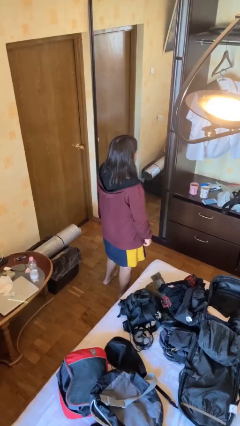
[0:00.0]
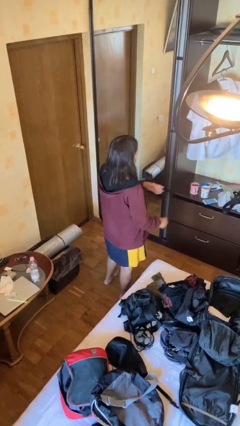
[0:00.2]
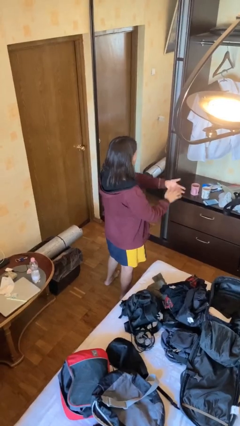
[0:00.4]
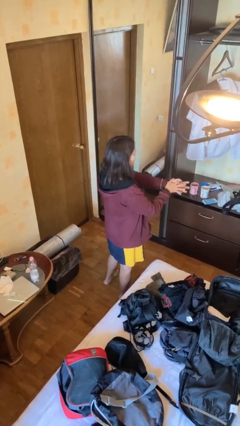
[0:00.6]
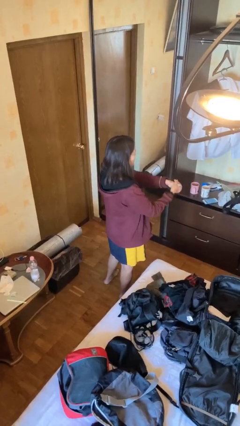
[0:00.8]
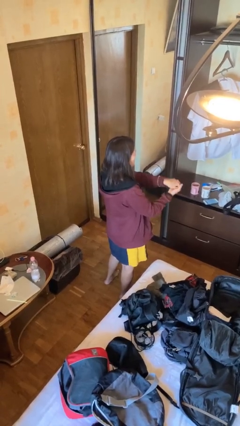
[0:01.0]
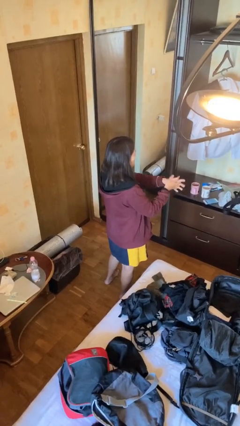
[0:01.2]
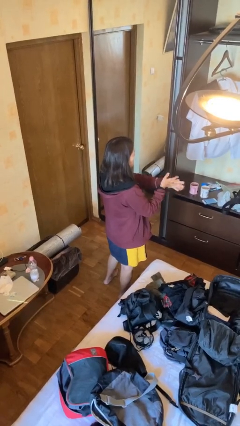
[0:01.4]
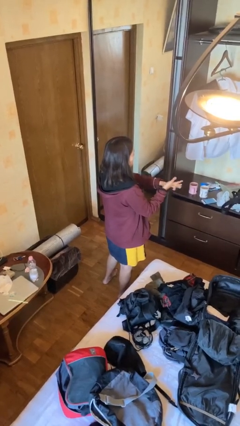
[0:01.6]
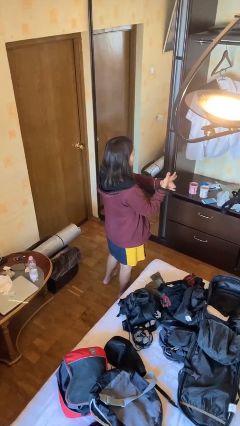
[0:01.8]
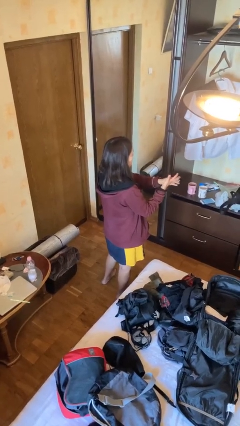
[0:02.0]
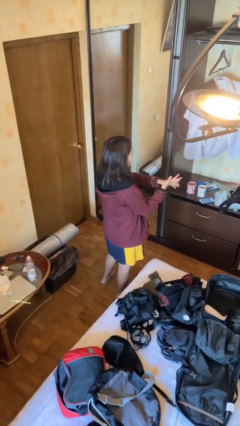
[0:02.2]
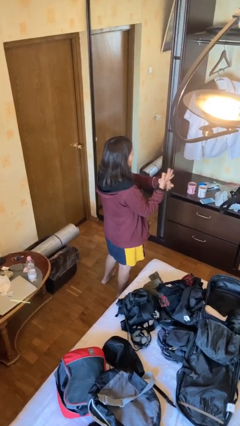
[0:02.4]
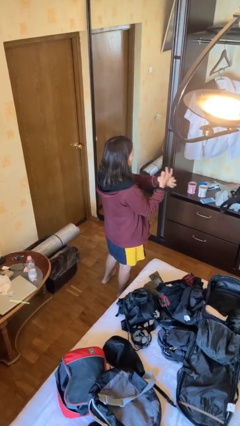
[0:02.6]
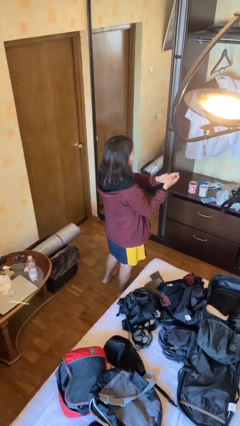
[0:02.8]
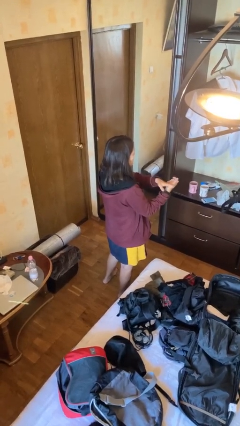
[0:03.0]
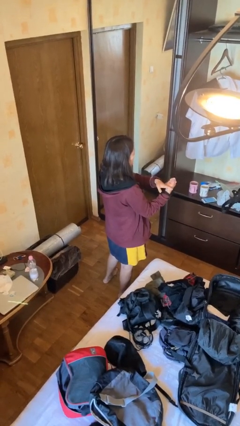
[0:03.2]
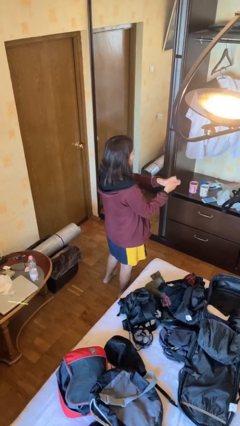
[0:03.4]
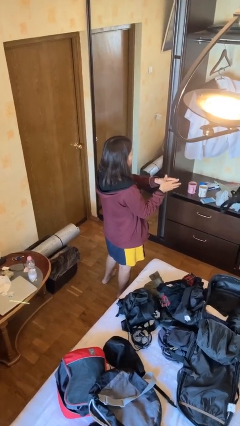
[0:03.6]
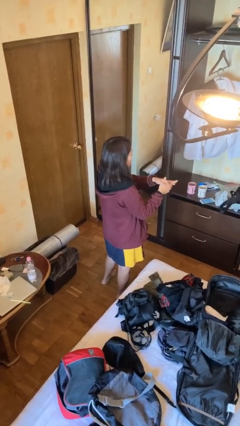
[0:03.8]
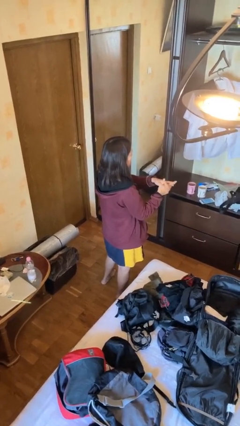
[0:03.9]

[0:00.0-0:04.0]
person cracks knuckles

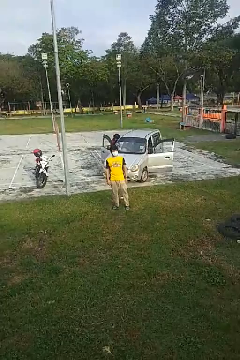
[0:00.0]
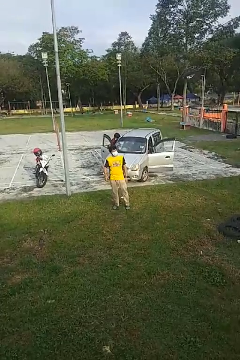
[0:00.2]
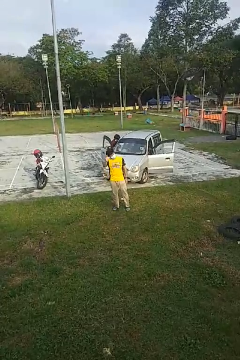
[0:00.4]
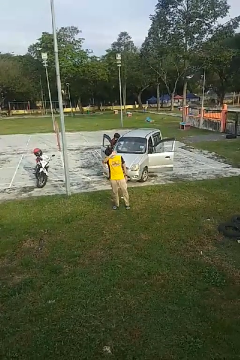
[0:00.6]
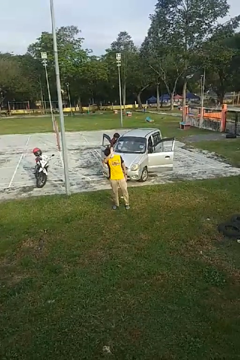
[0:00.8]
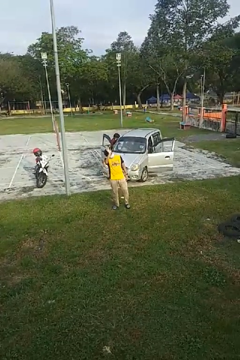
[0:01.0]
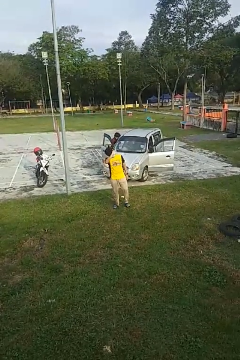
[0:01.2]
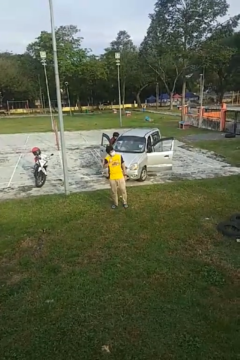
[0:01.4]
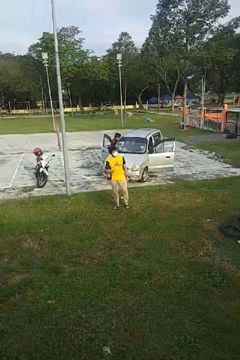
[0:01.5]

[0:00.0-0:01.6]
person waves at person

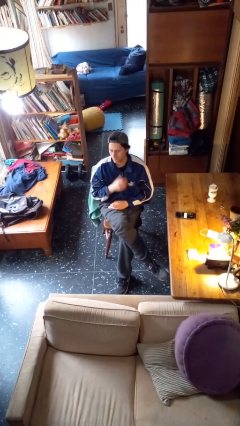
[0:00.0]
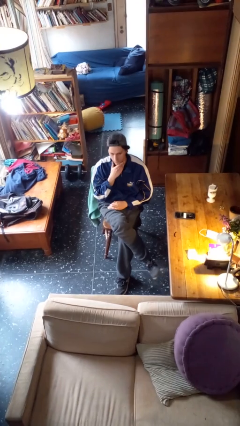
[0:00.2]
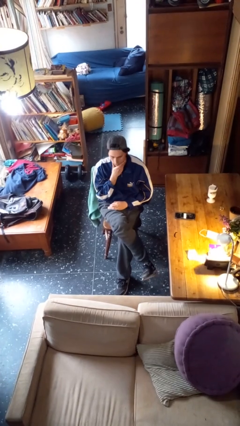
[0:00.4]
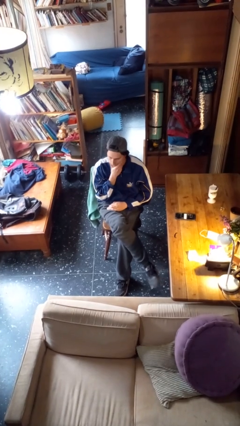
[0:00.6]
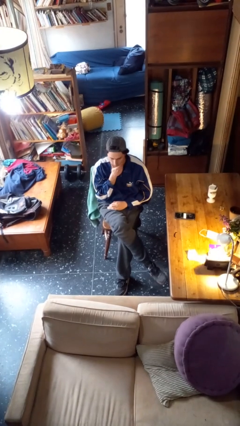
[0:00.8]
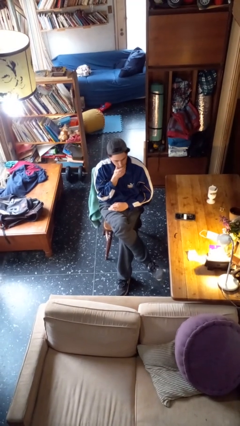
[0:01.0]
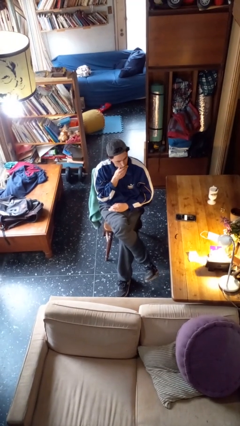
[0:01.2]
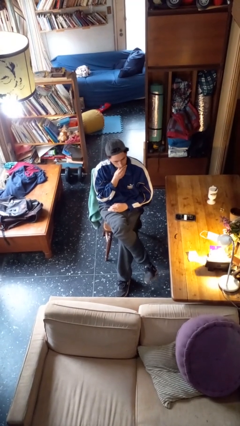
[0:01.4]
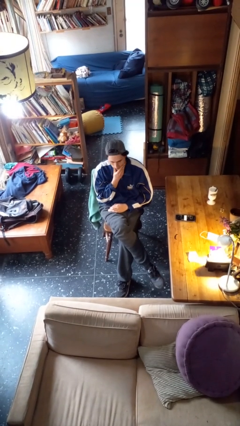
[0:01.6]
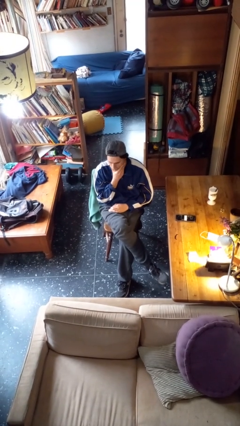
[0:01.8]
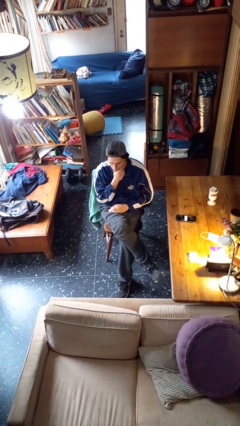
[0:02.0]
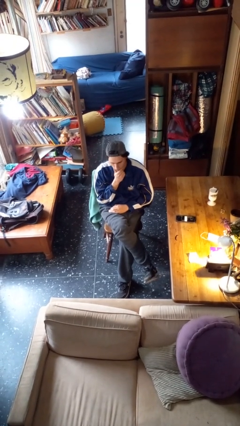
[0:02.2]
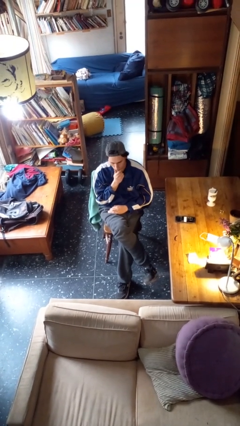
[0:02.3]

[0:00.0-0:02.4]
person strokes chin

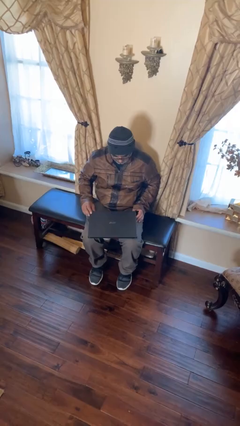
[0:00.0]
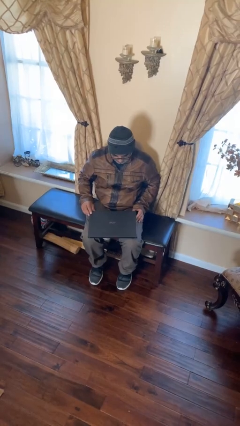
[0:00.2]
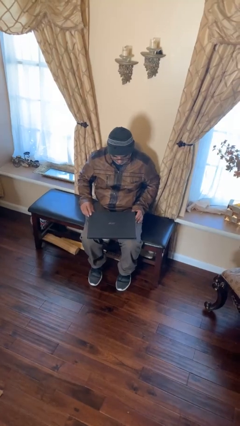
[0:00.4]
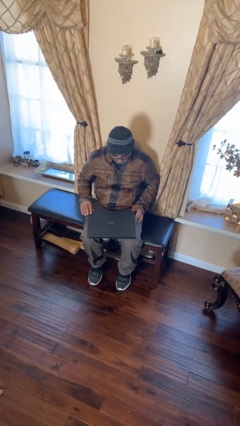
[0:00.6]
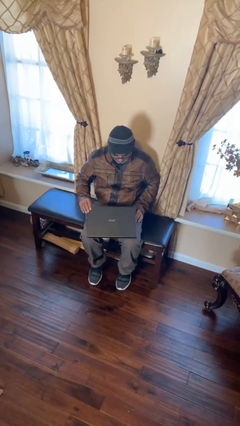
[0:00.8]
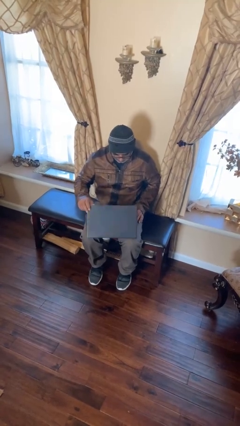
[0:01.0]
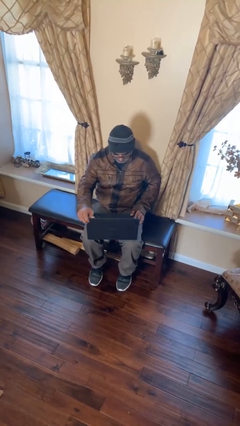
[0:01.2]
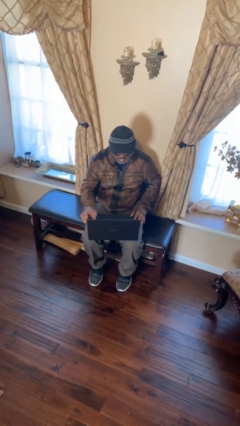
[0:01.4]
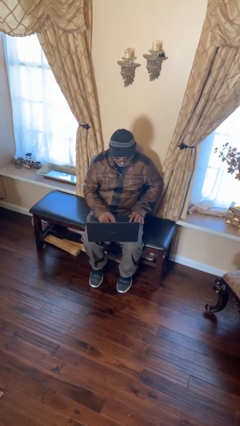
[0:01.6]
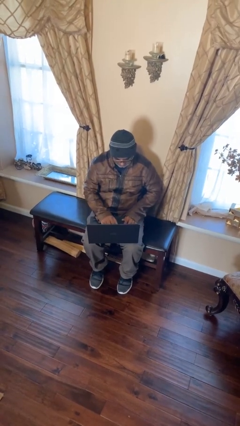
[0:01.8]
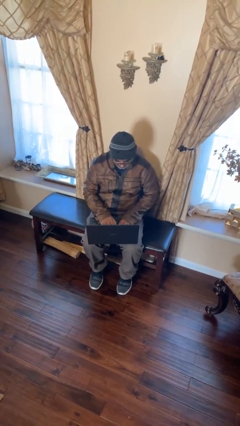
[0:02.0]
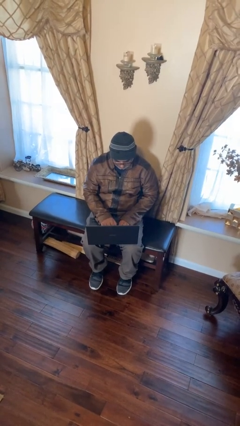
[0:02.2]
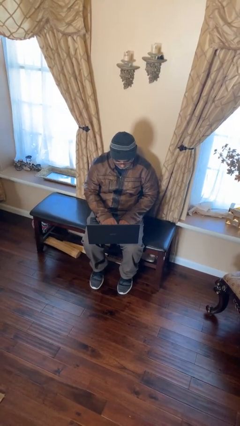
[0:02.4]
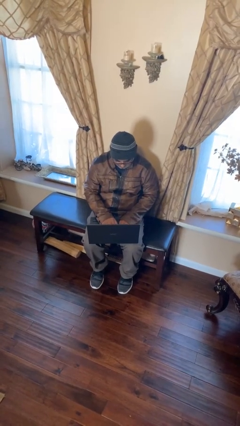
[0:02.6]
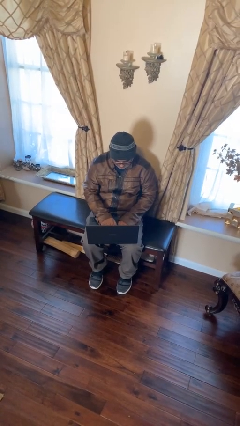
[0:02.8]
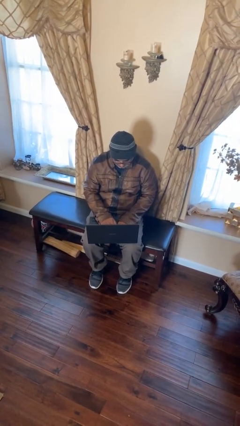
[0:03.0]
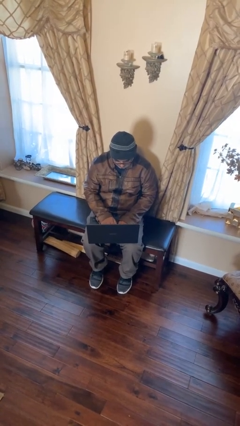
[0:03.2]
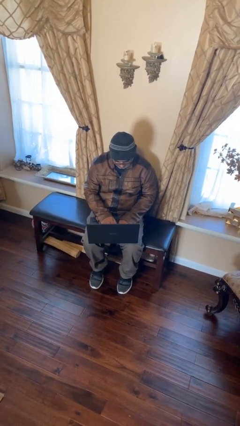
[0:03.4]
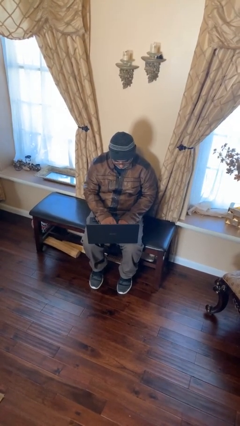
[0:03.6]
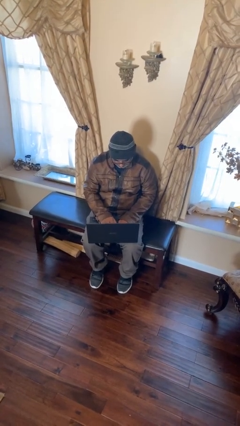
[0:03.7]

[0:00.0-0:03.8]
person interacts with laptop

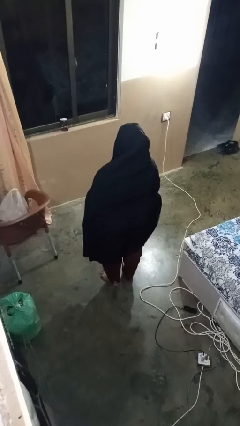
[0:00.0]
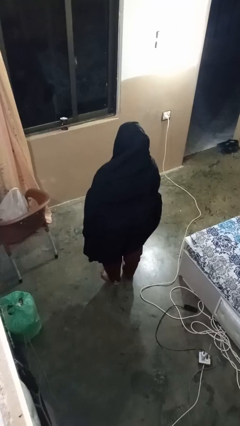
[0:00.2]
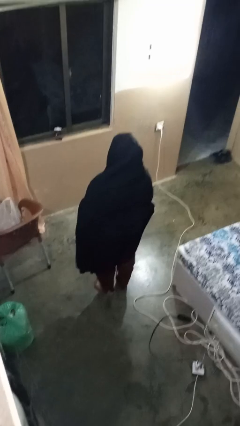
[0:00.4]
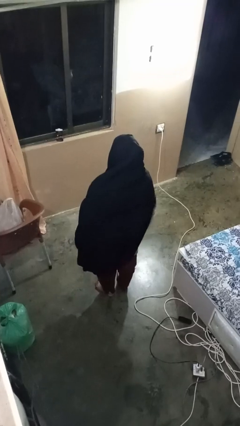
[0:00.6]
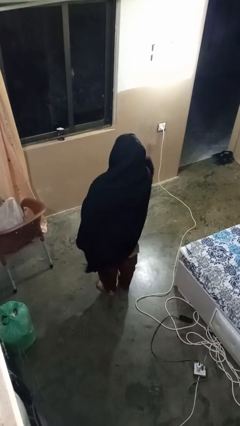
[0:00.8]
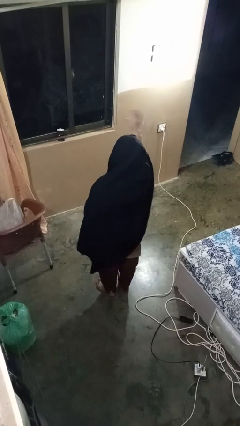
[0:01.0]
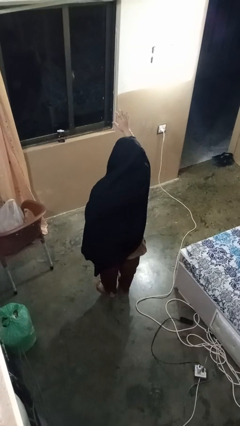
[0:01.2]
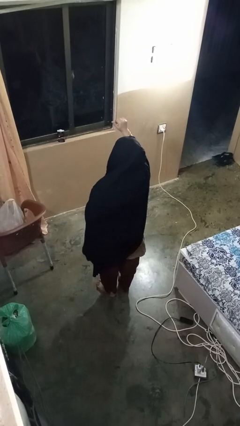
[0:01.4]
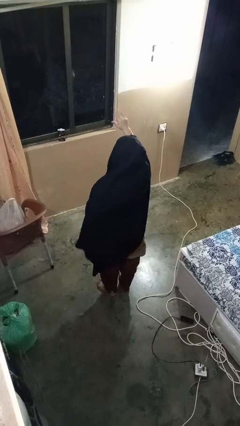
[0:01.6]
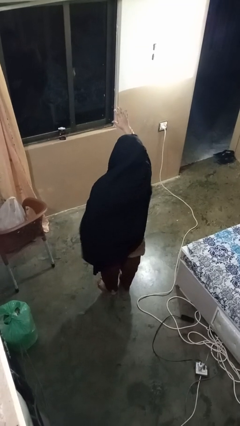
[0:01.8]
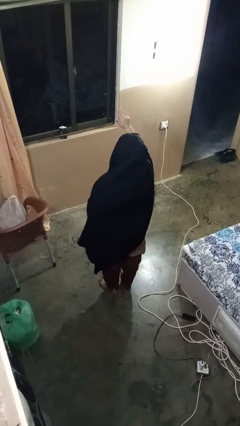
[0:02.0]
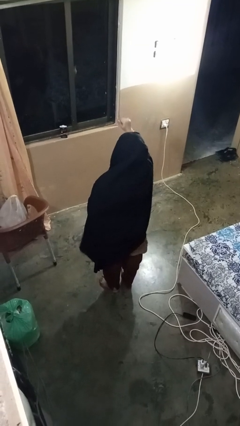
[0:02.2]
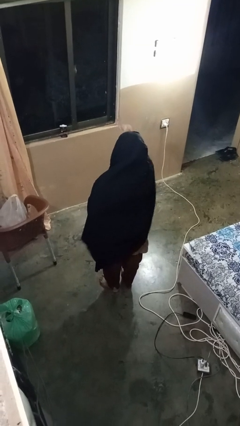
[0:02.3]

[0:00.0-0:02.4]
person gestures come here

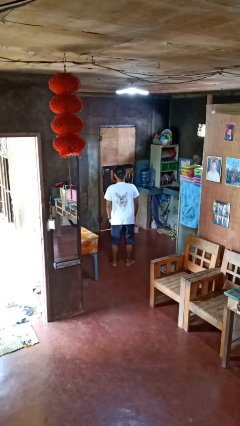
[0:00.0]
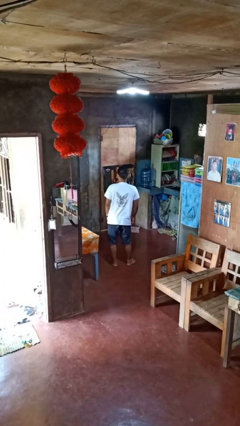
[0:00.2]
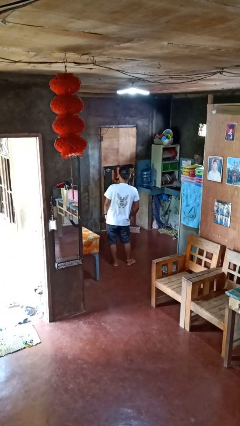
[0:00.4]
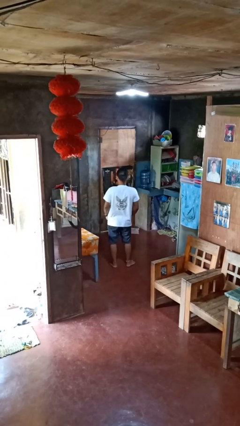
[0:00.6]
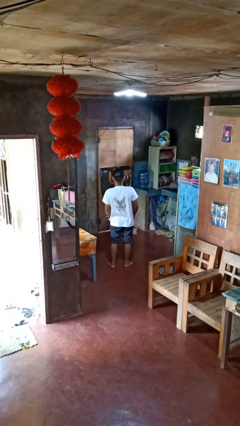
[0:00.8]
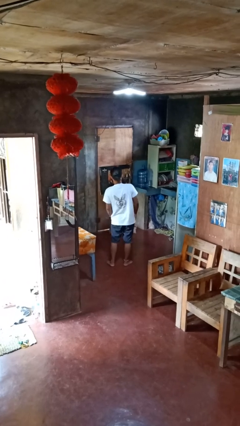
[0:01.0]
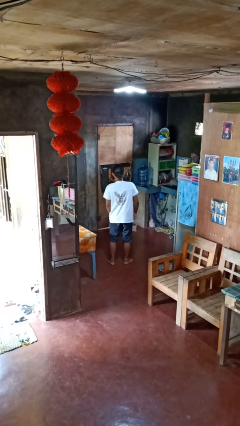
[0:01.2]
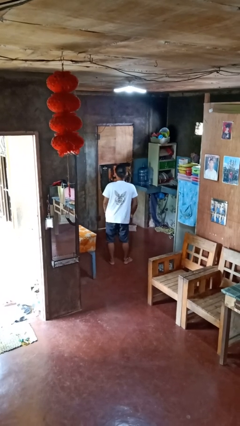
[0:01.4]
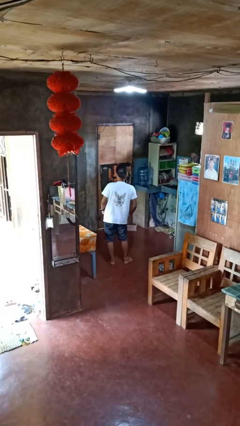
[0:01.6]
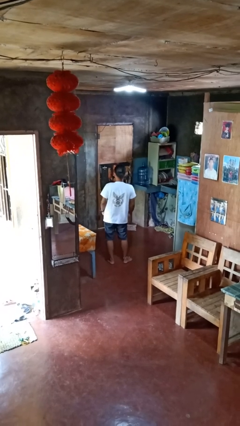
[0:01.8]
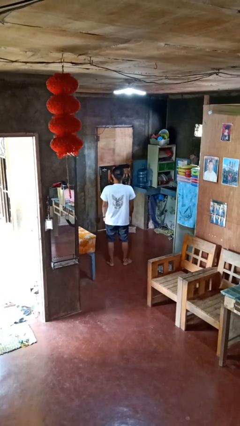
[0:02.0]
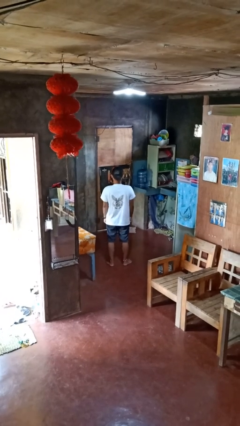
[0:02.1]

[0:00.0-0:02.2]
person wiggles hips

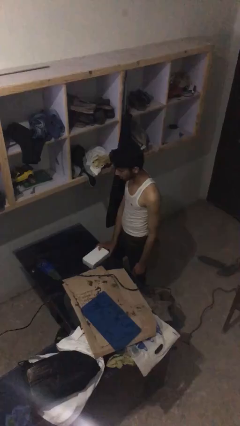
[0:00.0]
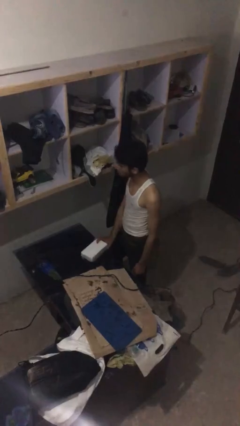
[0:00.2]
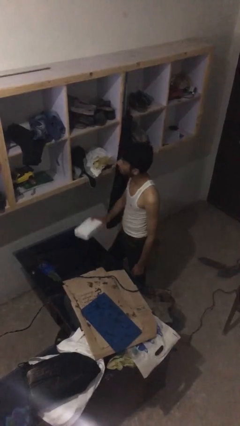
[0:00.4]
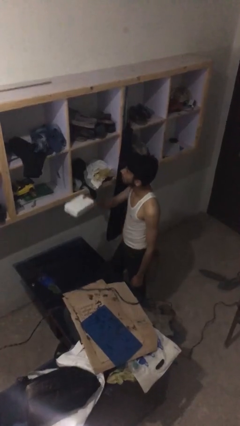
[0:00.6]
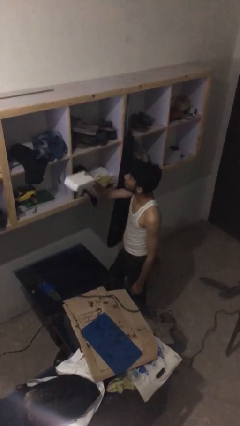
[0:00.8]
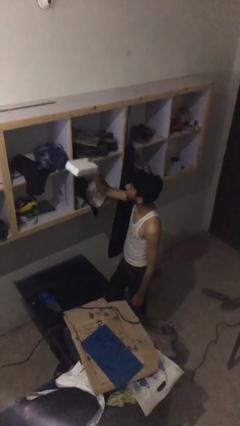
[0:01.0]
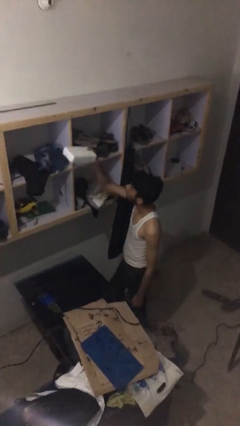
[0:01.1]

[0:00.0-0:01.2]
person picks up object from table
